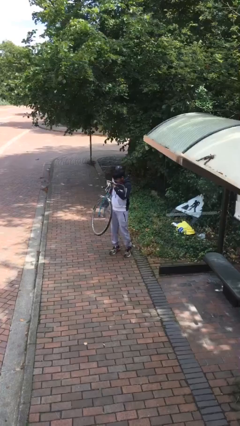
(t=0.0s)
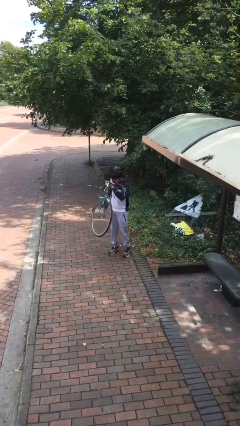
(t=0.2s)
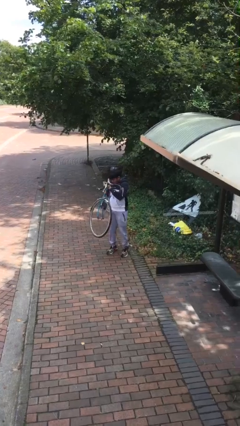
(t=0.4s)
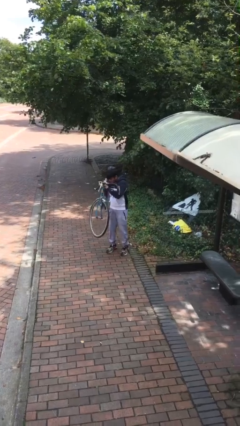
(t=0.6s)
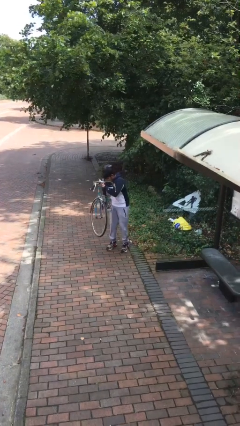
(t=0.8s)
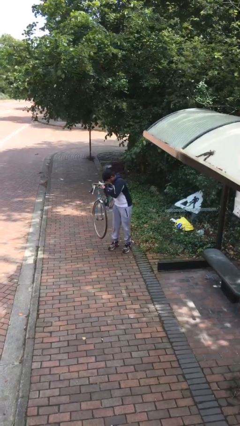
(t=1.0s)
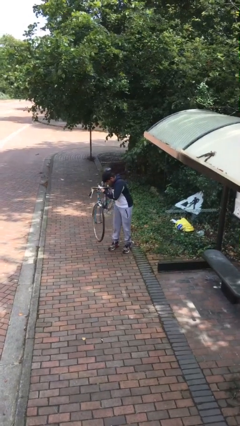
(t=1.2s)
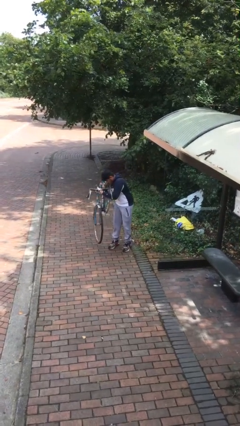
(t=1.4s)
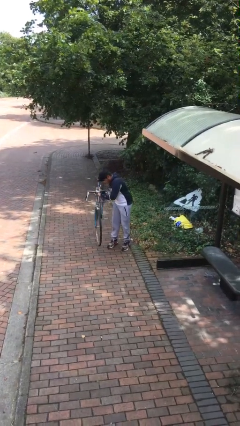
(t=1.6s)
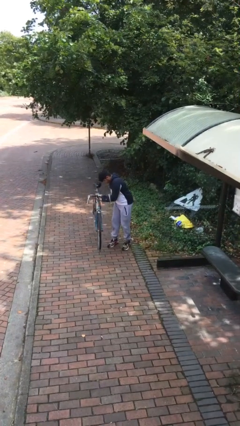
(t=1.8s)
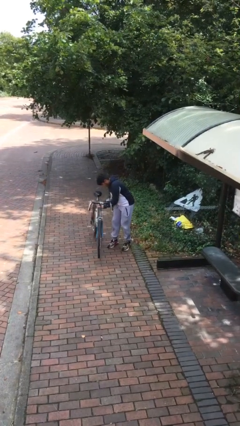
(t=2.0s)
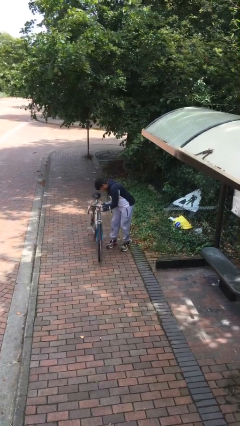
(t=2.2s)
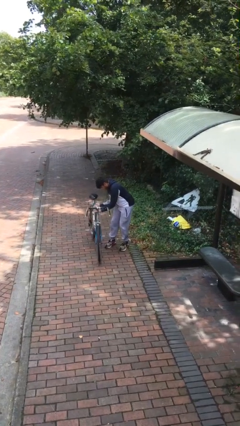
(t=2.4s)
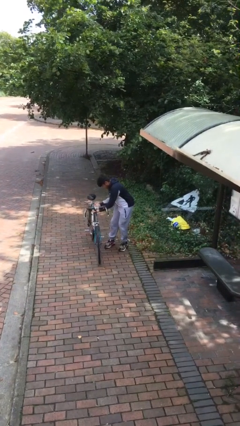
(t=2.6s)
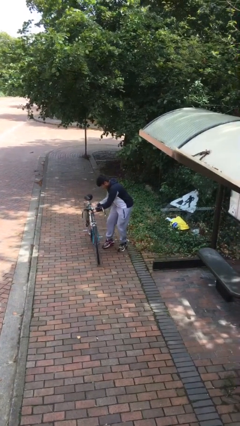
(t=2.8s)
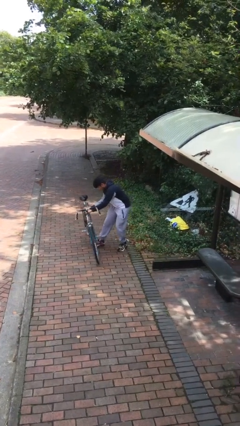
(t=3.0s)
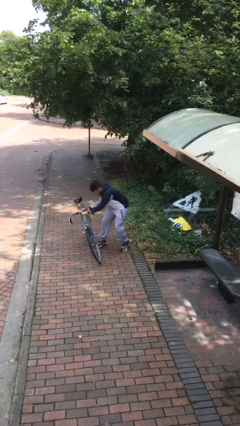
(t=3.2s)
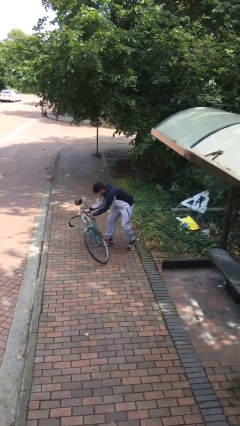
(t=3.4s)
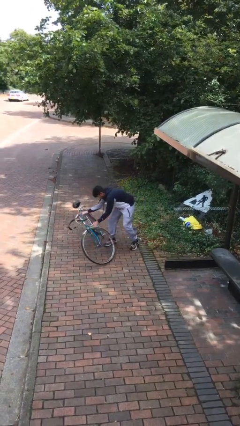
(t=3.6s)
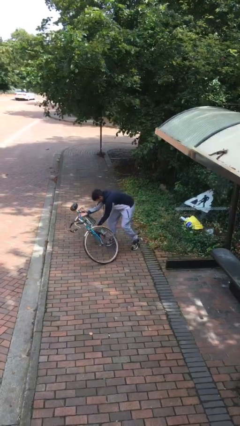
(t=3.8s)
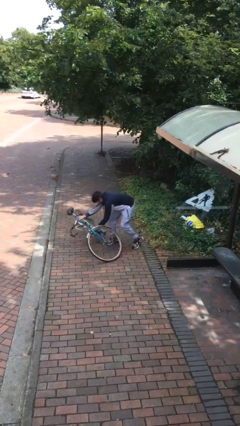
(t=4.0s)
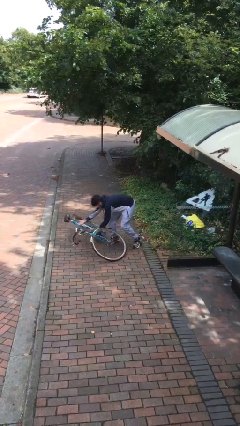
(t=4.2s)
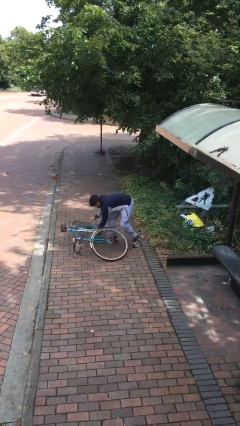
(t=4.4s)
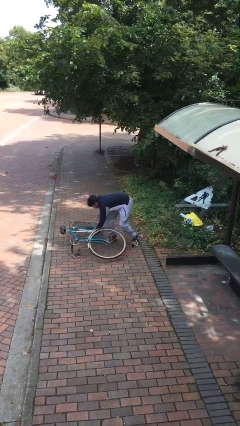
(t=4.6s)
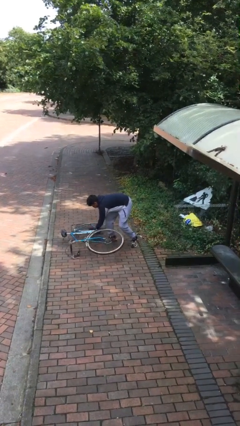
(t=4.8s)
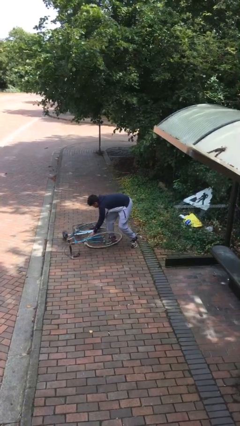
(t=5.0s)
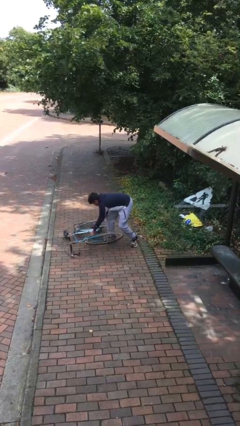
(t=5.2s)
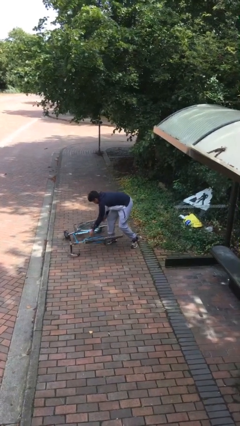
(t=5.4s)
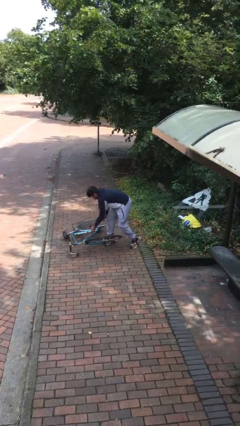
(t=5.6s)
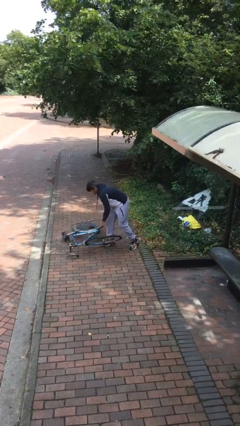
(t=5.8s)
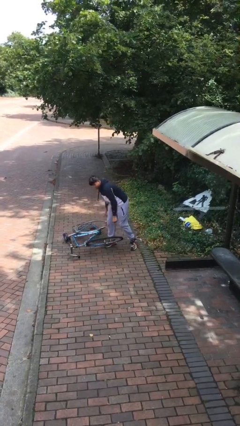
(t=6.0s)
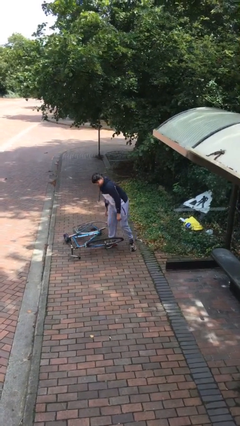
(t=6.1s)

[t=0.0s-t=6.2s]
person puts down object on floor

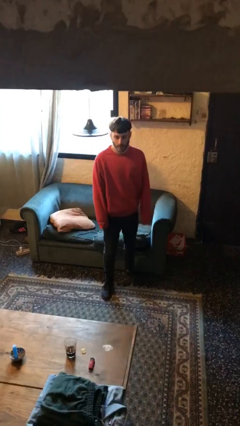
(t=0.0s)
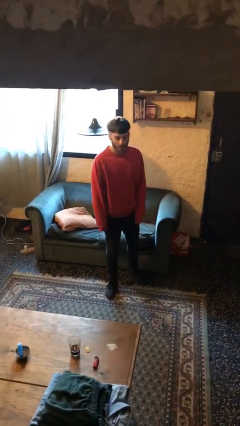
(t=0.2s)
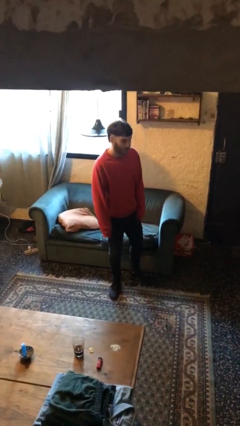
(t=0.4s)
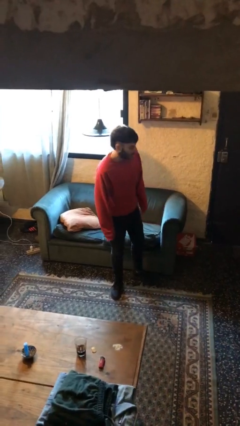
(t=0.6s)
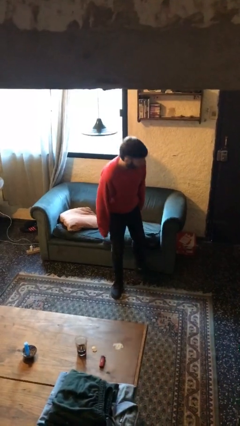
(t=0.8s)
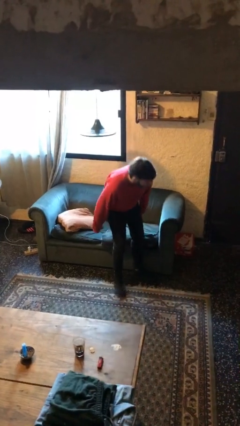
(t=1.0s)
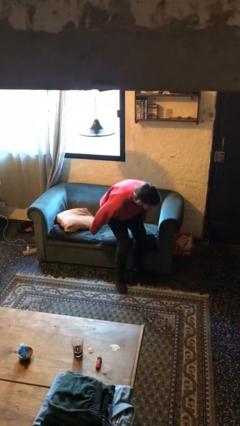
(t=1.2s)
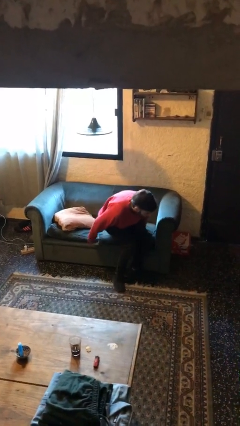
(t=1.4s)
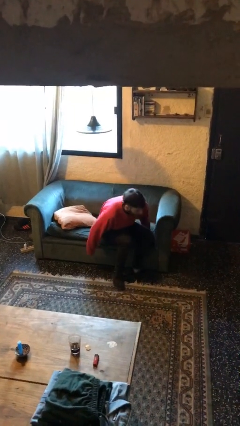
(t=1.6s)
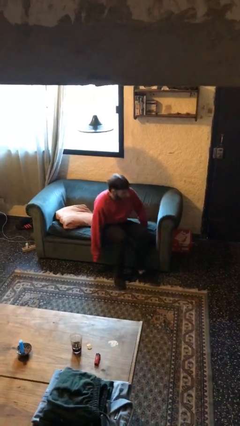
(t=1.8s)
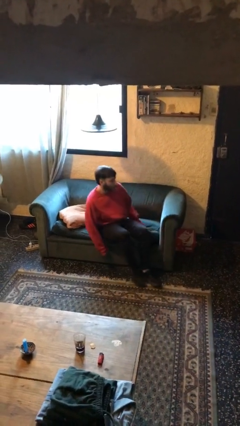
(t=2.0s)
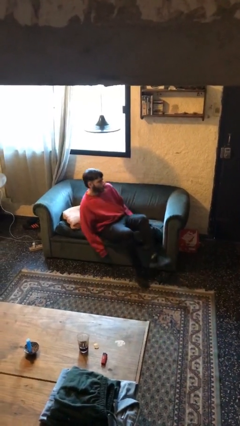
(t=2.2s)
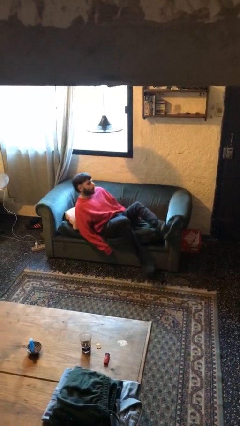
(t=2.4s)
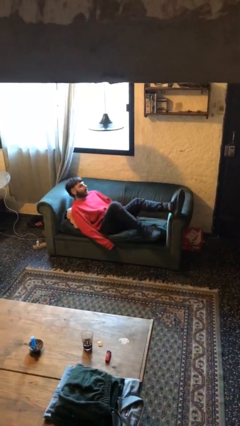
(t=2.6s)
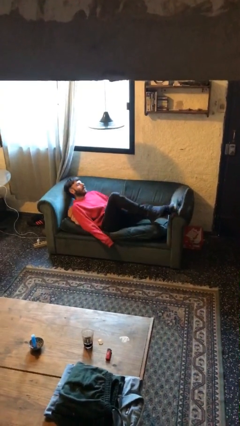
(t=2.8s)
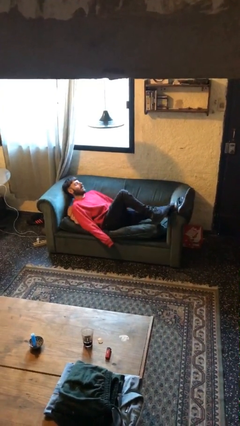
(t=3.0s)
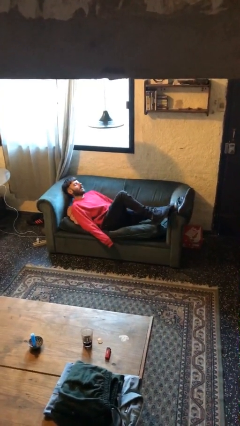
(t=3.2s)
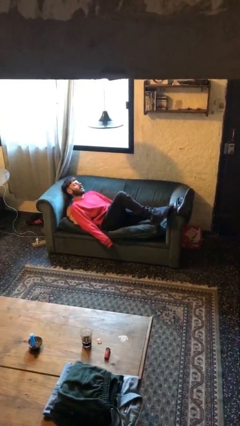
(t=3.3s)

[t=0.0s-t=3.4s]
person lies down on couch

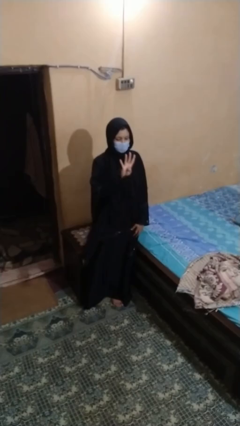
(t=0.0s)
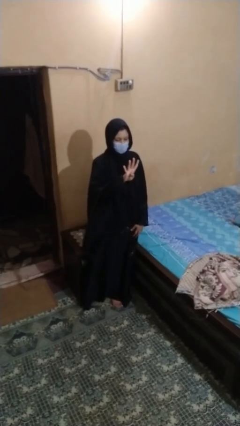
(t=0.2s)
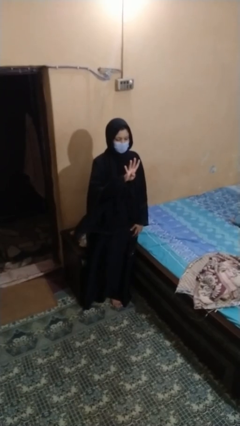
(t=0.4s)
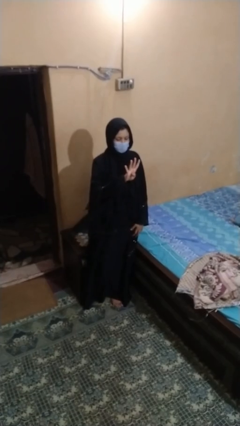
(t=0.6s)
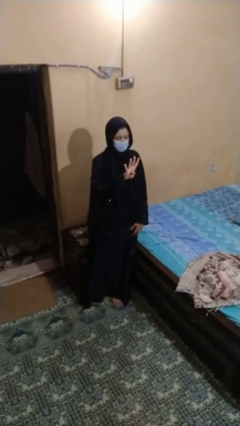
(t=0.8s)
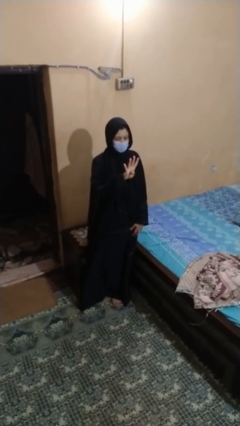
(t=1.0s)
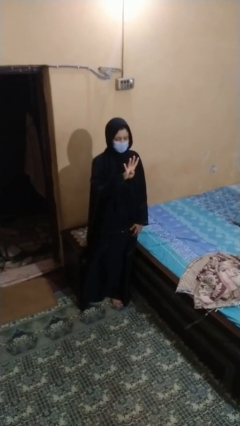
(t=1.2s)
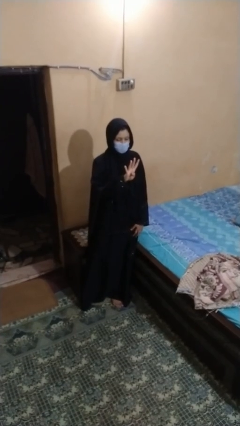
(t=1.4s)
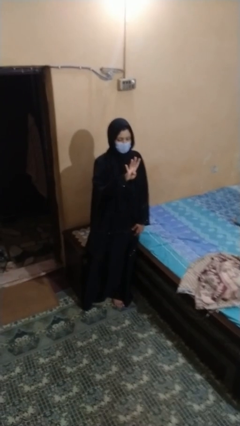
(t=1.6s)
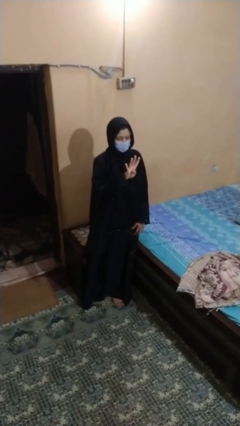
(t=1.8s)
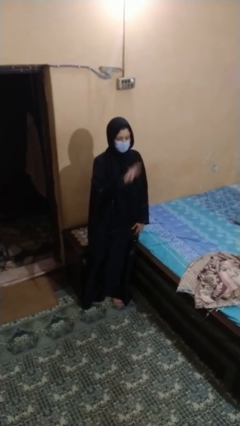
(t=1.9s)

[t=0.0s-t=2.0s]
person gestures number four

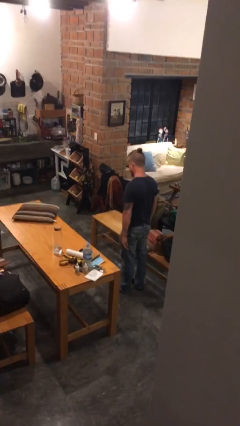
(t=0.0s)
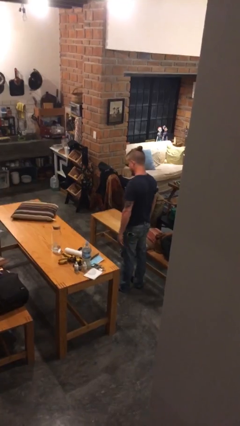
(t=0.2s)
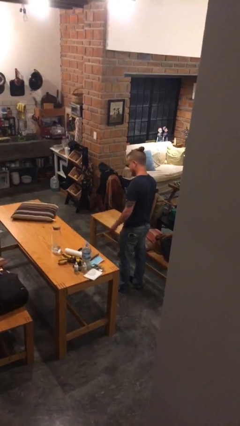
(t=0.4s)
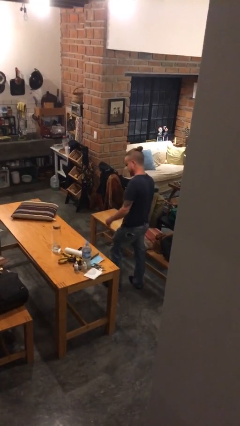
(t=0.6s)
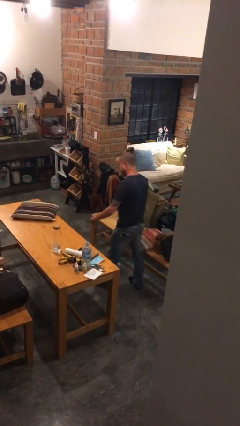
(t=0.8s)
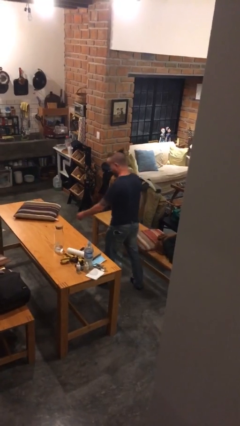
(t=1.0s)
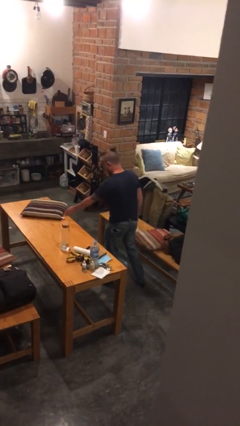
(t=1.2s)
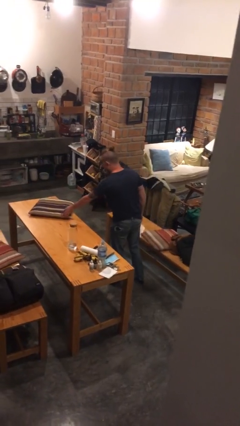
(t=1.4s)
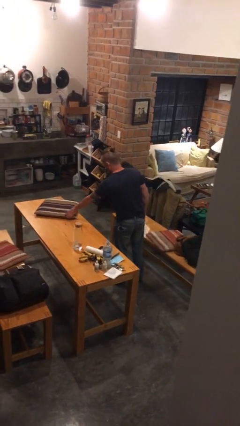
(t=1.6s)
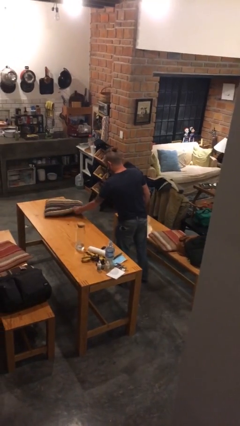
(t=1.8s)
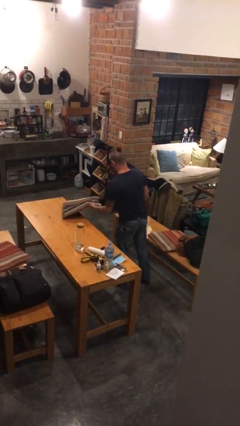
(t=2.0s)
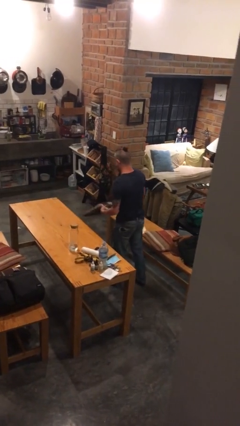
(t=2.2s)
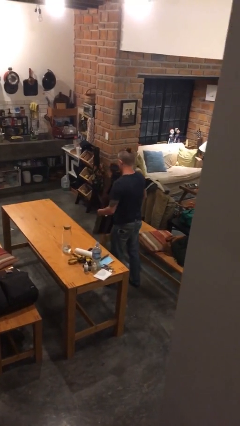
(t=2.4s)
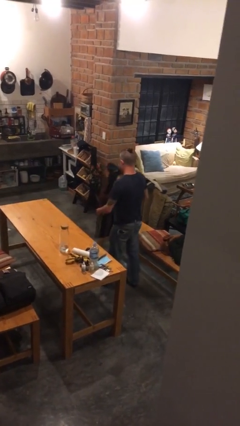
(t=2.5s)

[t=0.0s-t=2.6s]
person picks up object from table

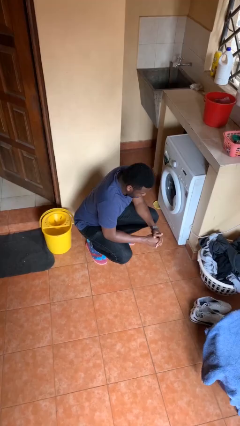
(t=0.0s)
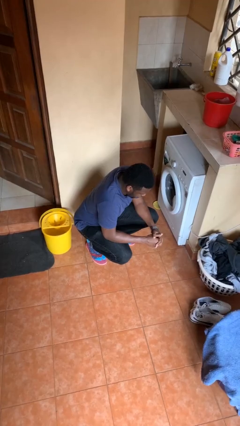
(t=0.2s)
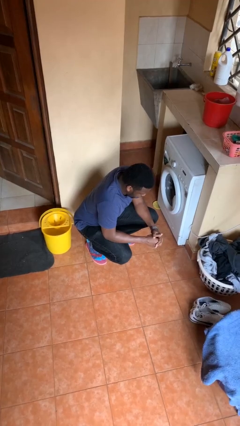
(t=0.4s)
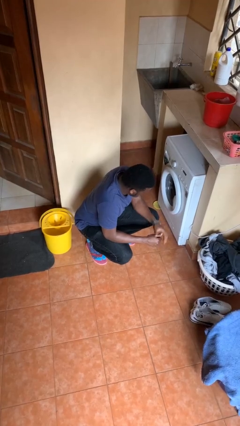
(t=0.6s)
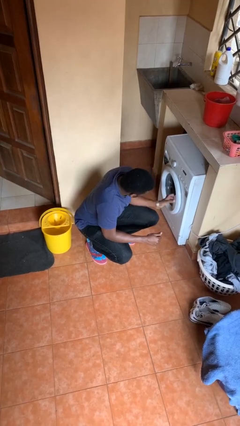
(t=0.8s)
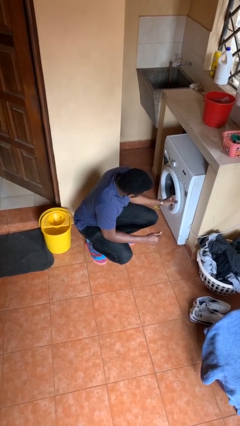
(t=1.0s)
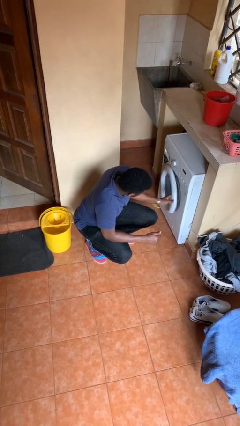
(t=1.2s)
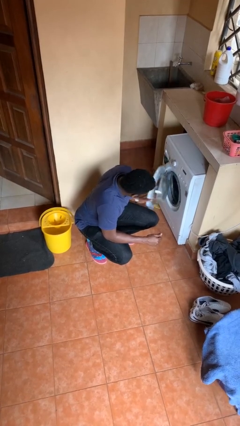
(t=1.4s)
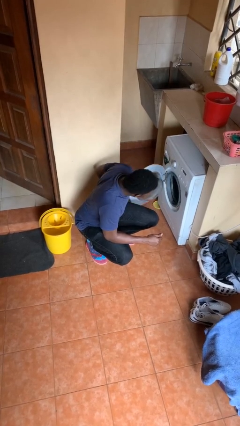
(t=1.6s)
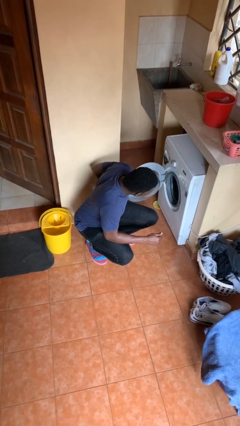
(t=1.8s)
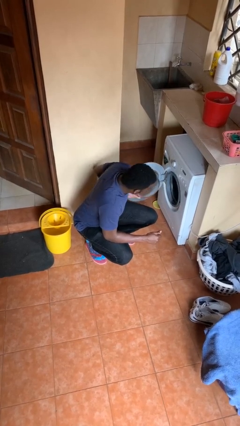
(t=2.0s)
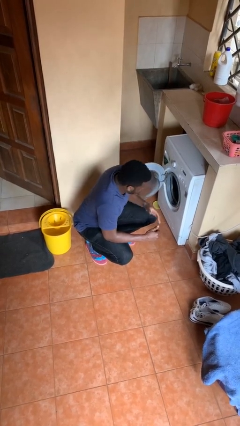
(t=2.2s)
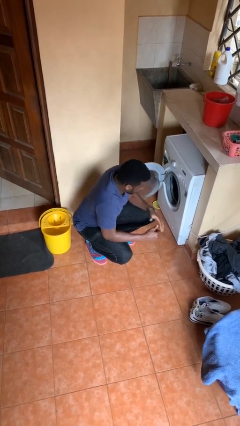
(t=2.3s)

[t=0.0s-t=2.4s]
person opens clothes washer

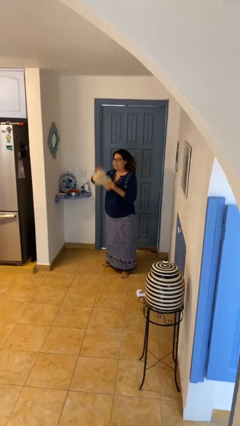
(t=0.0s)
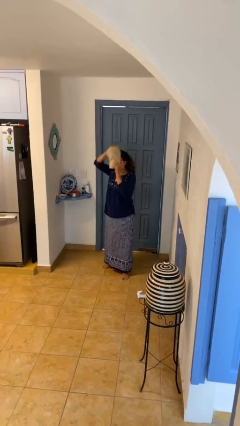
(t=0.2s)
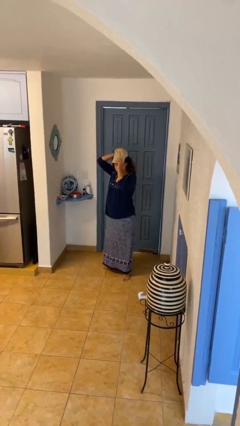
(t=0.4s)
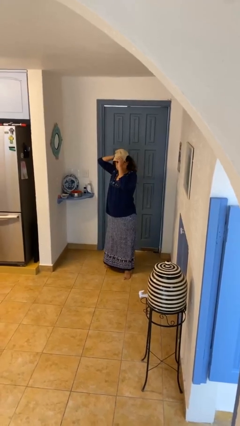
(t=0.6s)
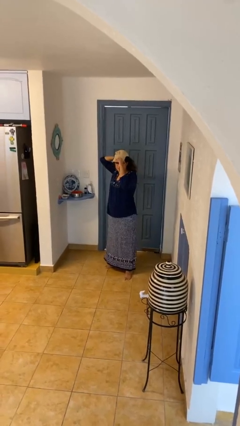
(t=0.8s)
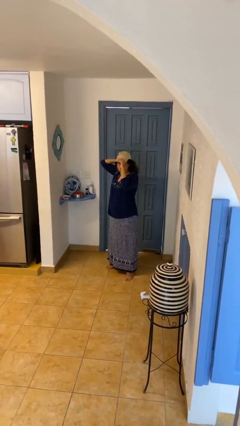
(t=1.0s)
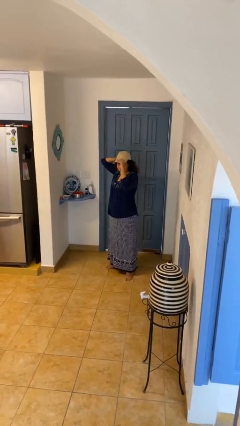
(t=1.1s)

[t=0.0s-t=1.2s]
person puts on hat
